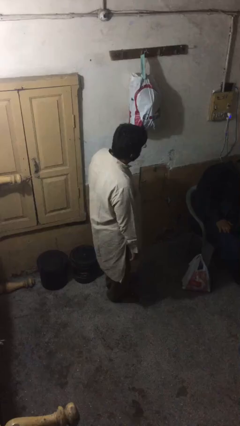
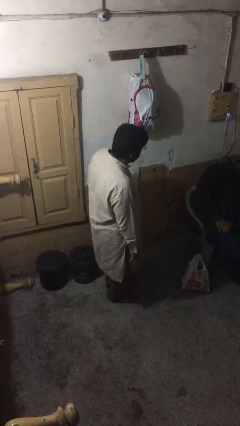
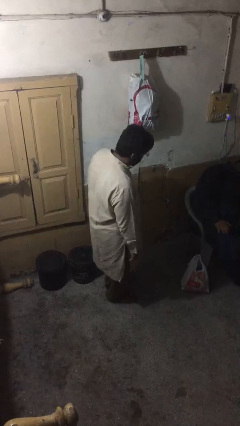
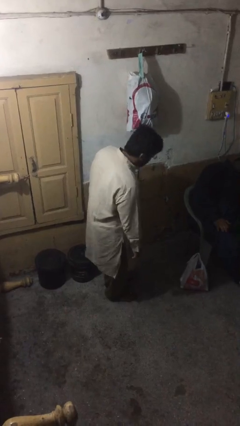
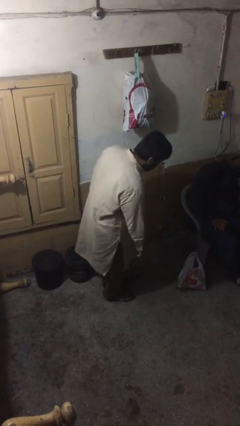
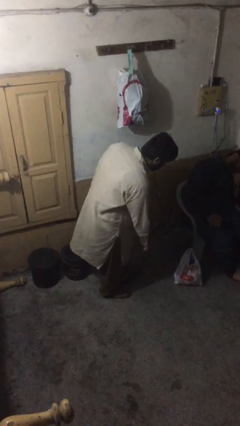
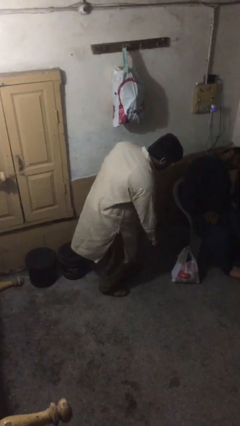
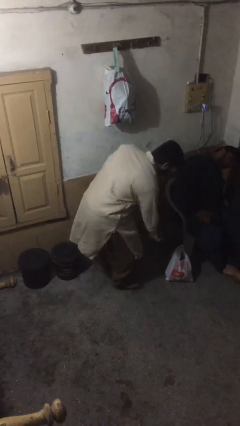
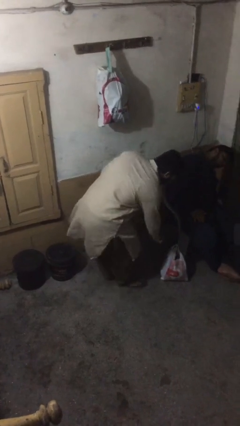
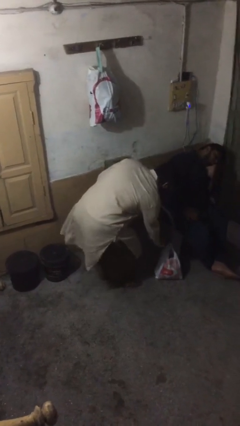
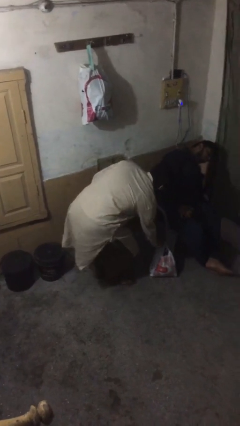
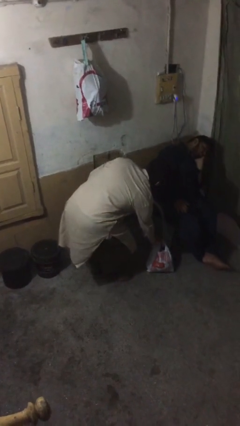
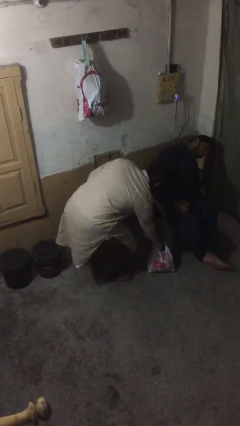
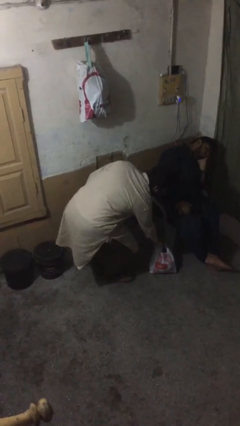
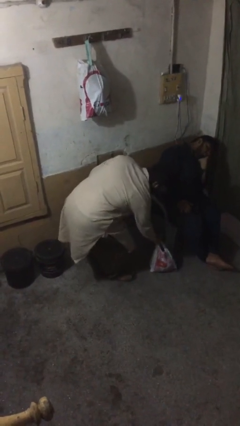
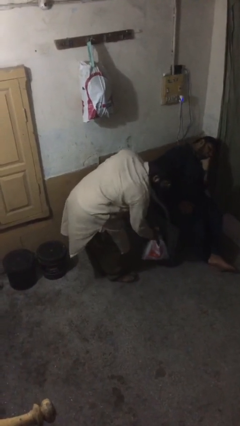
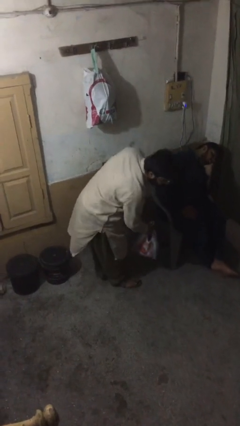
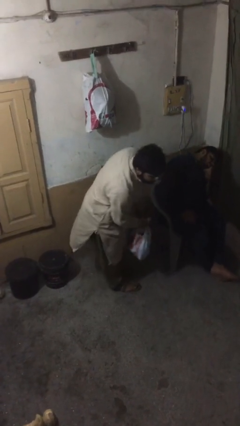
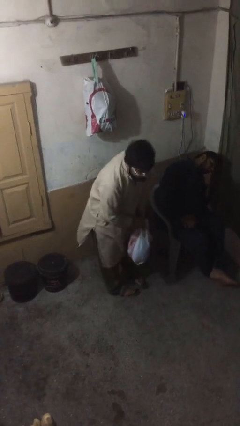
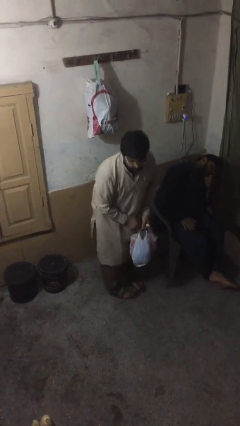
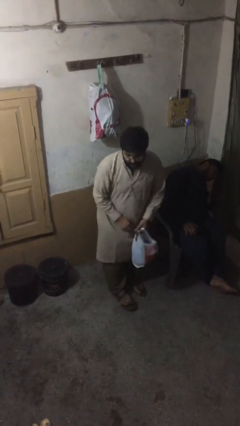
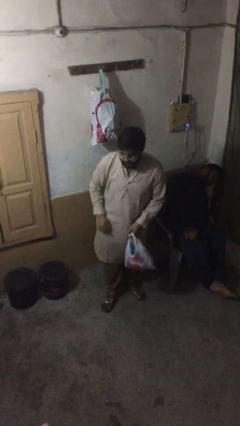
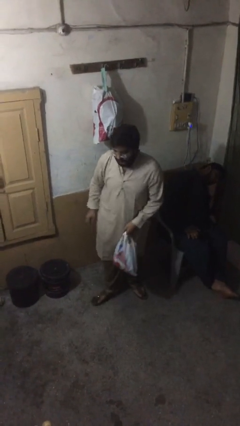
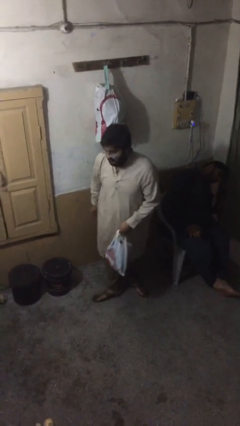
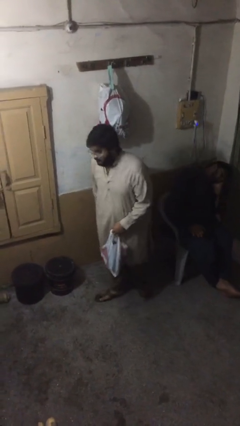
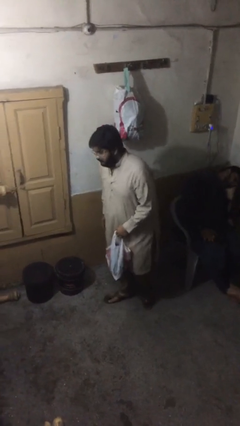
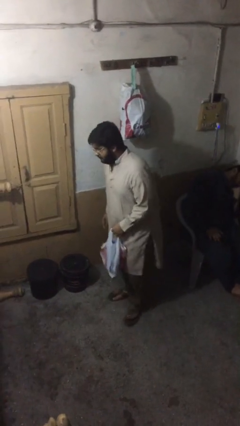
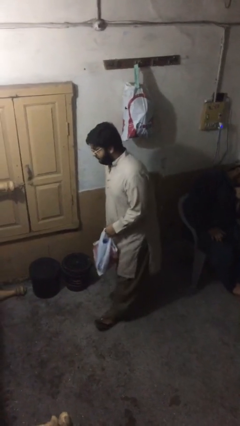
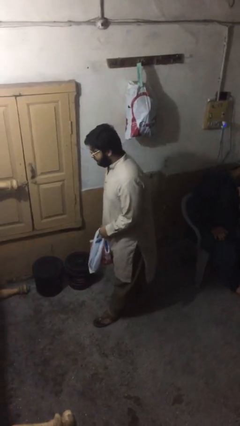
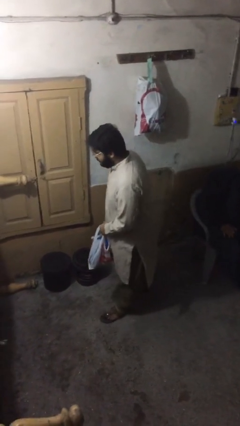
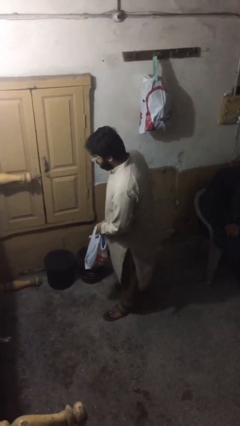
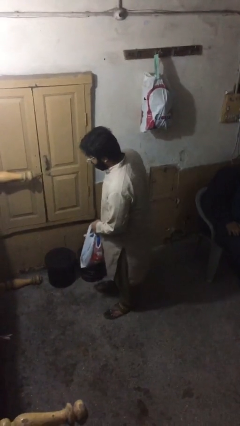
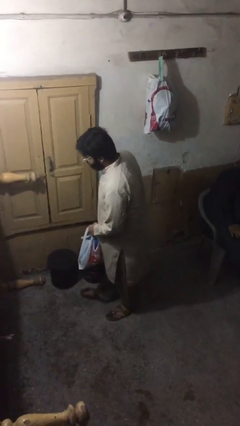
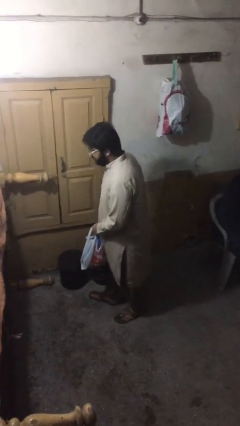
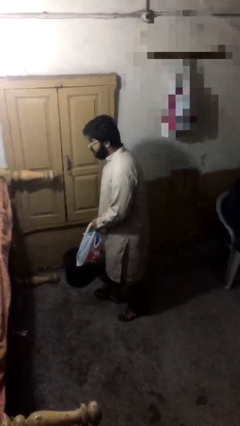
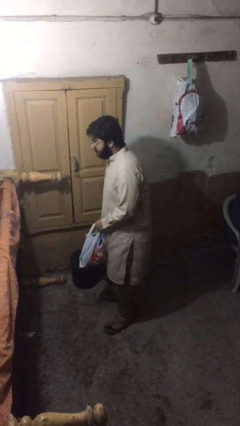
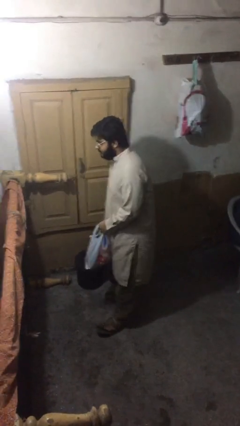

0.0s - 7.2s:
person steals object from person

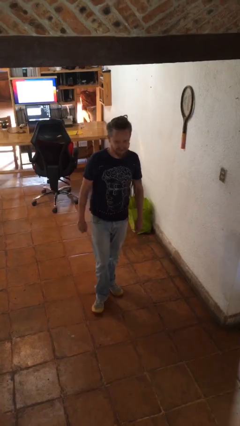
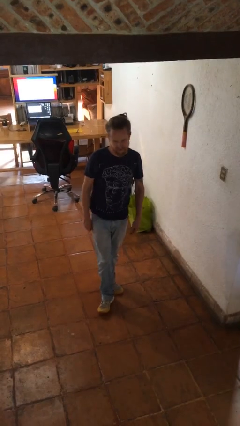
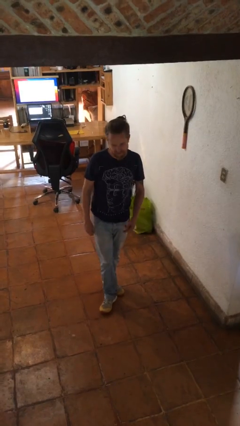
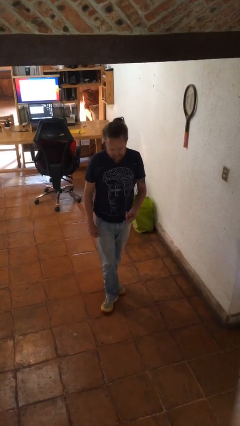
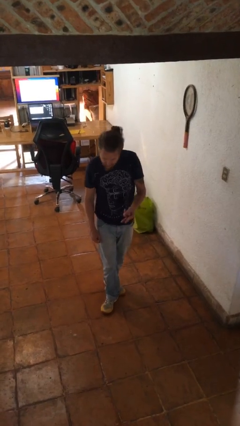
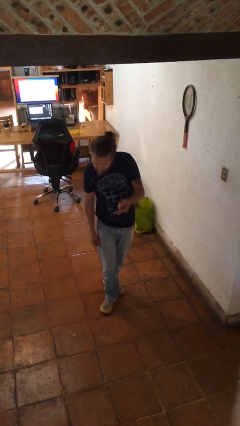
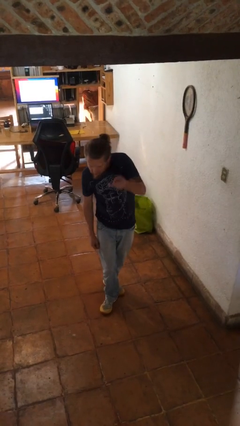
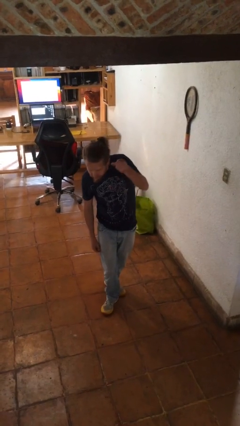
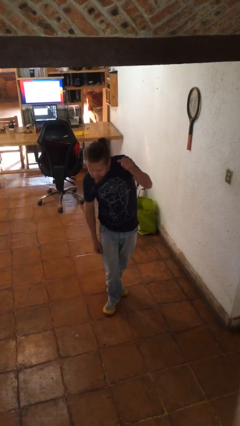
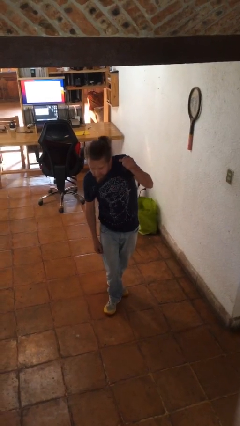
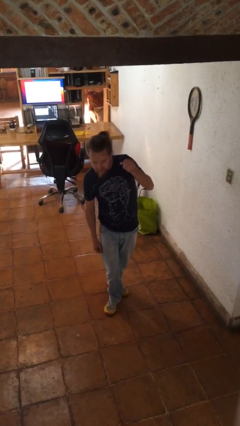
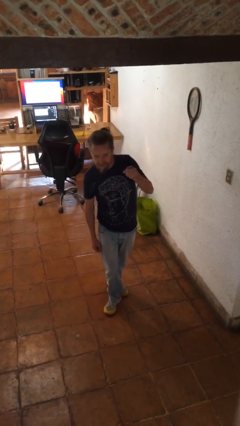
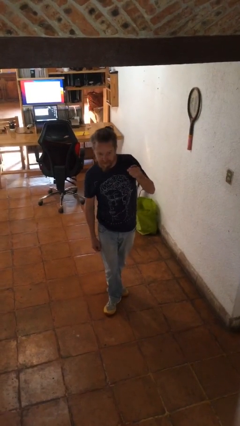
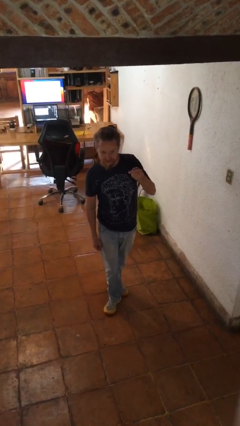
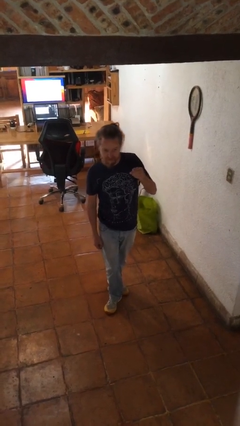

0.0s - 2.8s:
person gestures swipe up

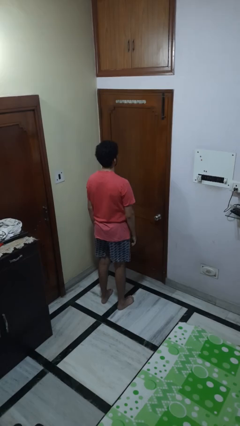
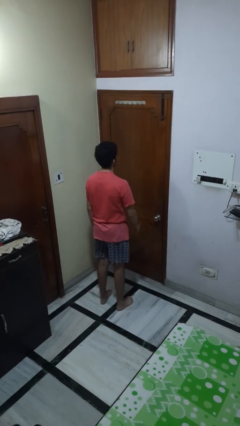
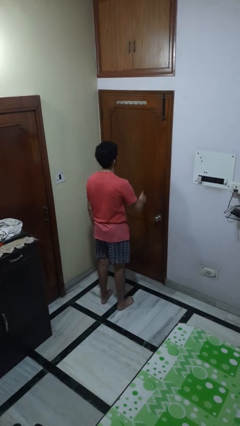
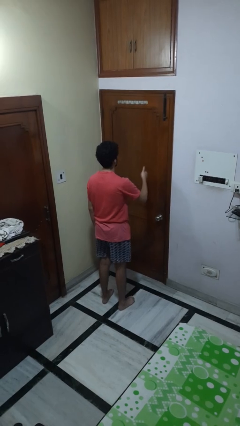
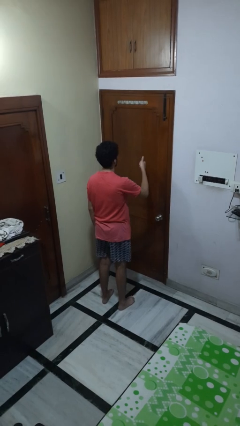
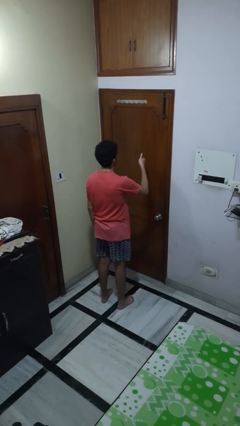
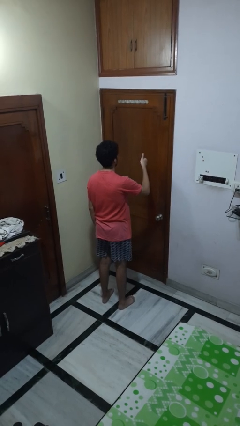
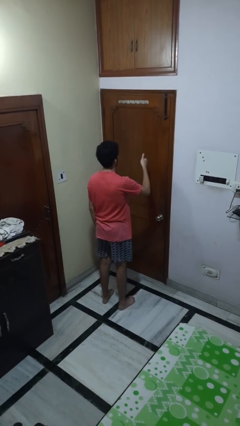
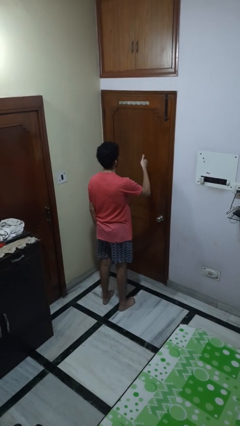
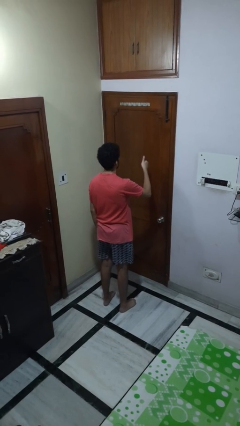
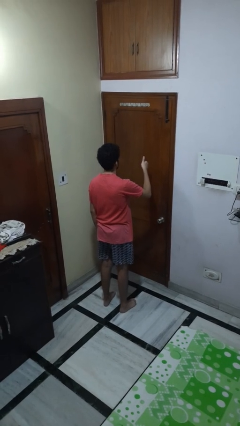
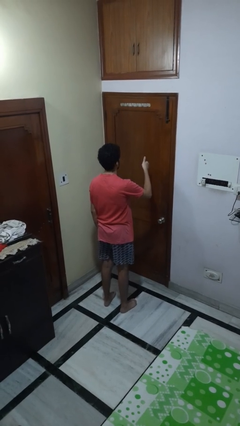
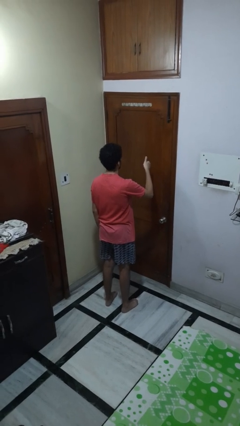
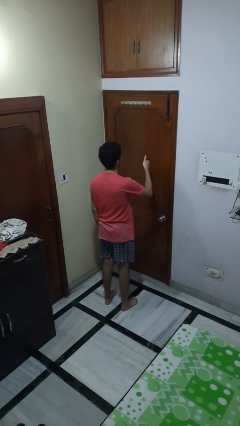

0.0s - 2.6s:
person gestures hang loose

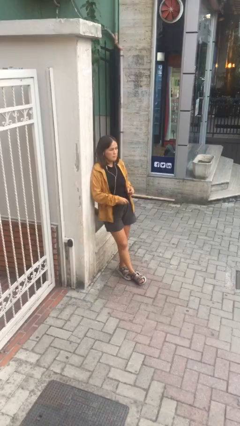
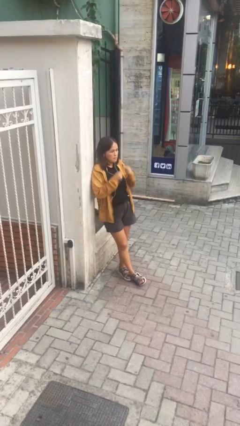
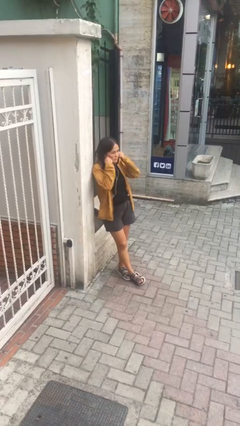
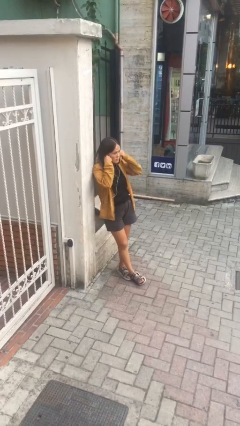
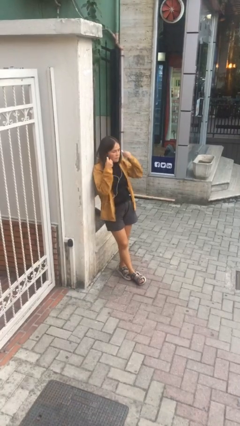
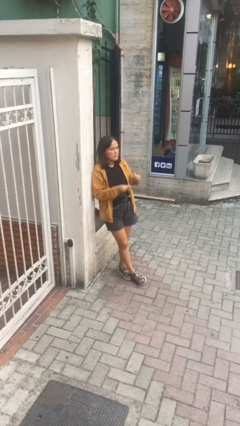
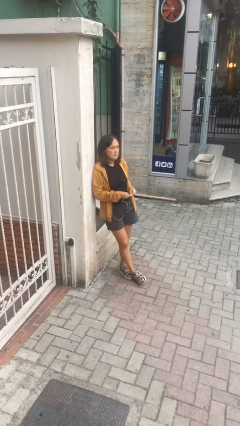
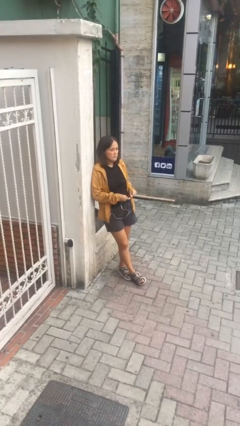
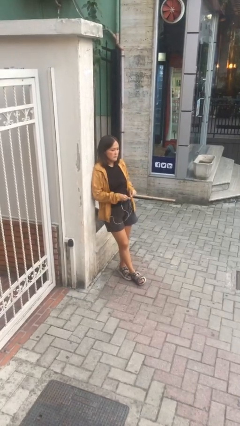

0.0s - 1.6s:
person takes off headphones

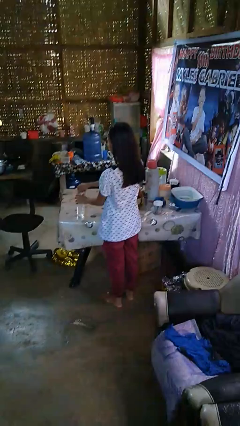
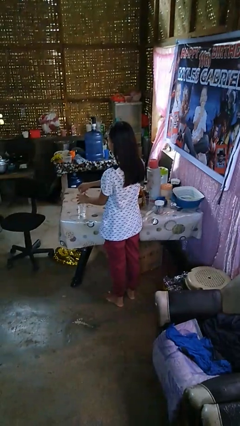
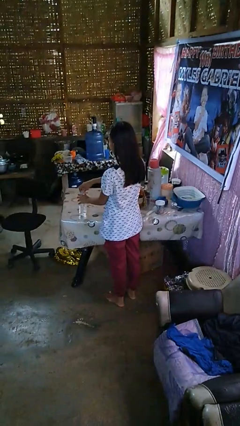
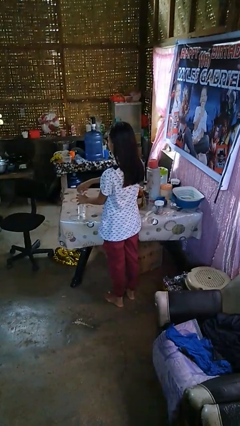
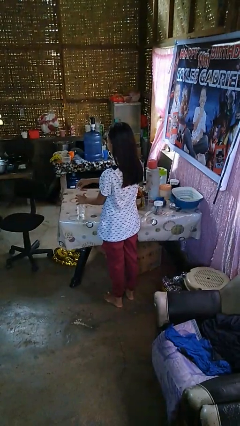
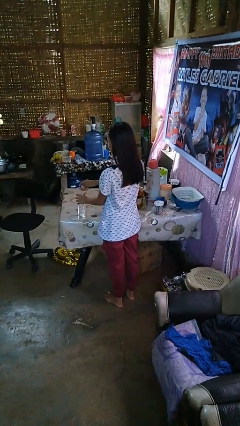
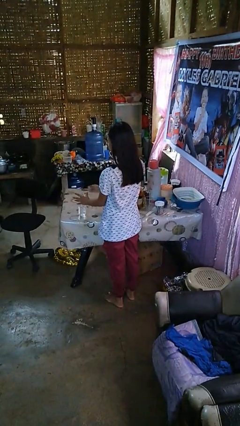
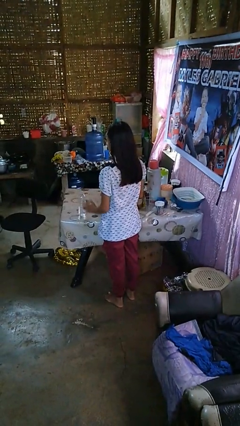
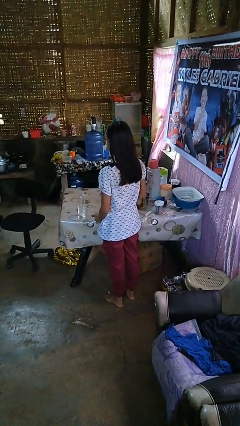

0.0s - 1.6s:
person unscrews lid from bottle

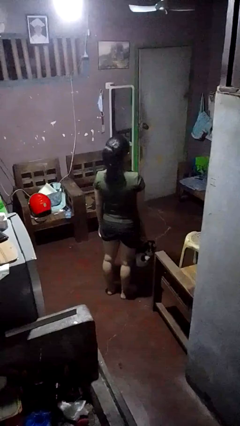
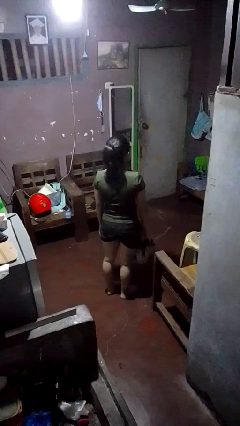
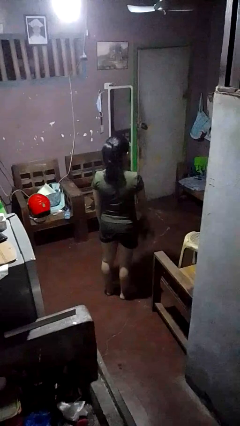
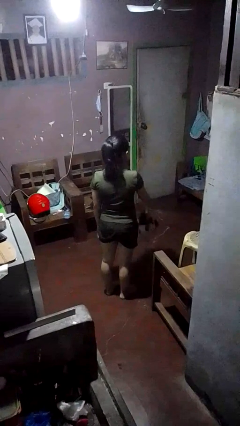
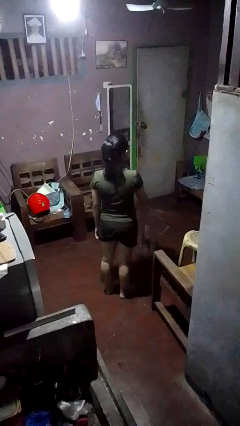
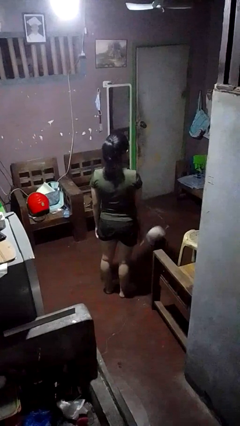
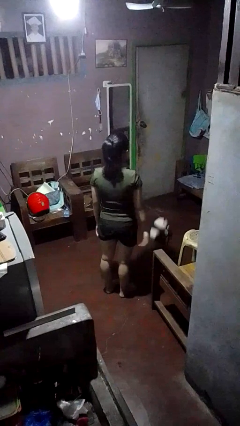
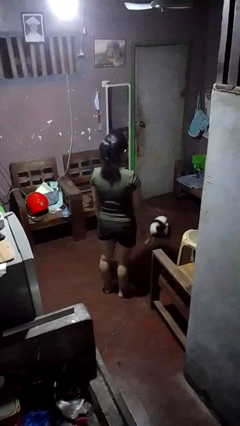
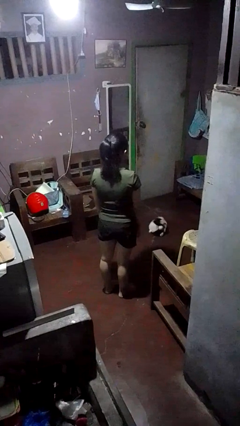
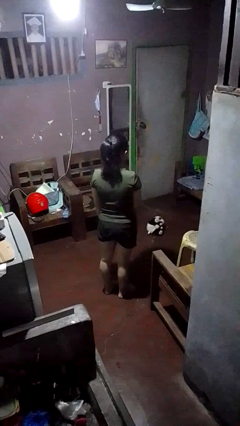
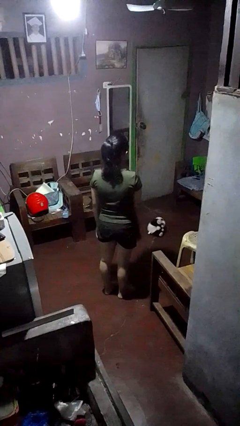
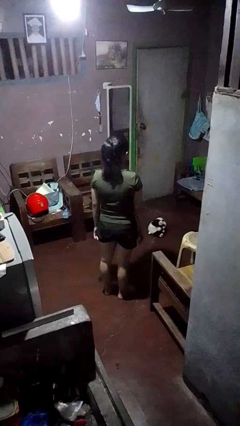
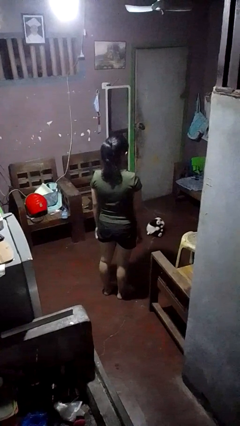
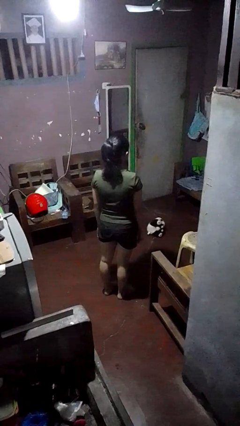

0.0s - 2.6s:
person throws object to ground
